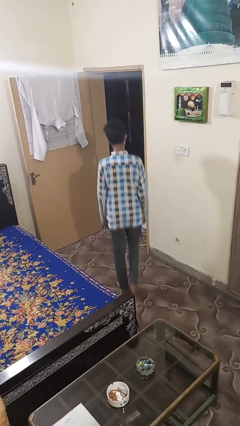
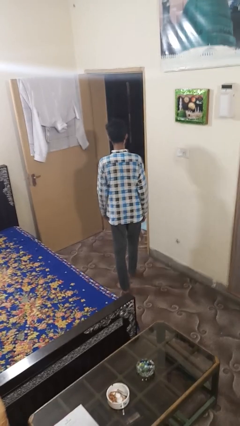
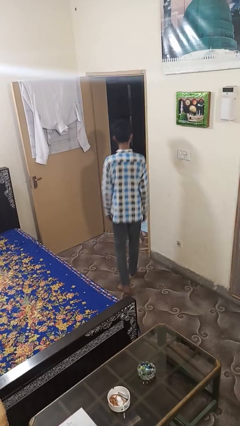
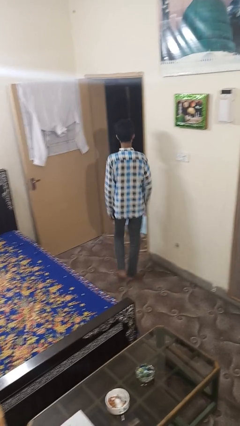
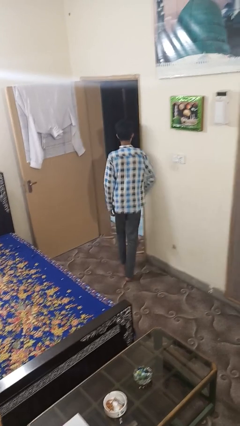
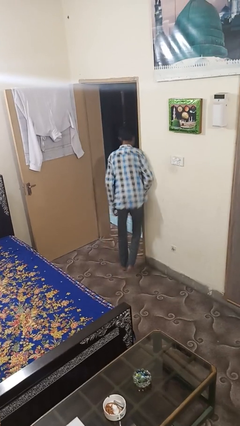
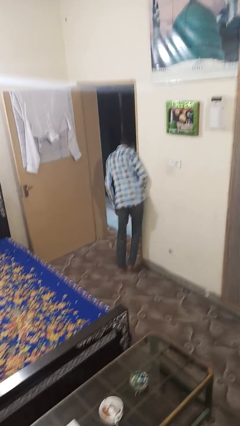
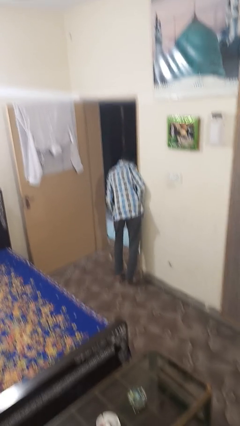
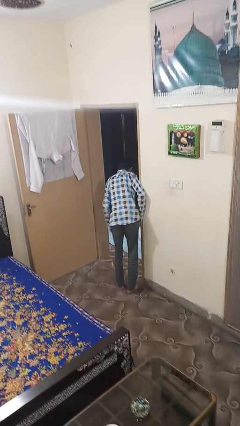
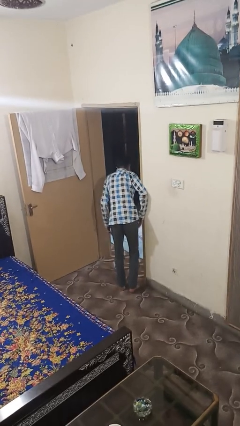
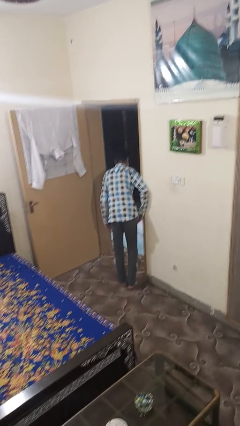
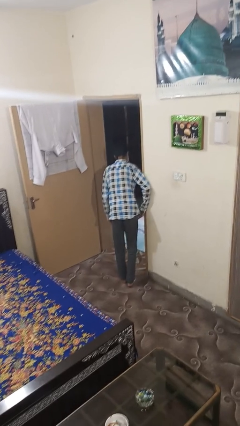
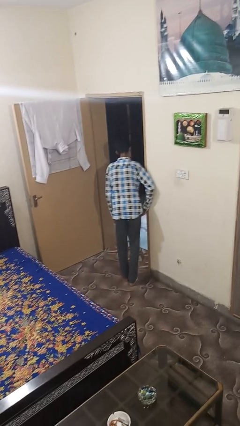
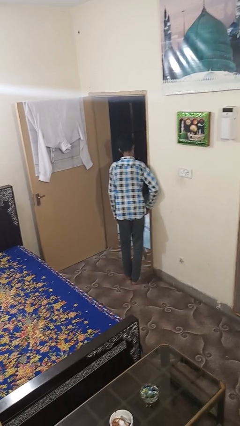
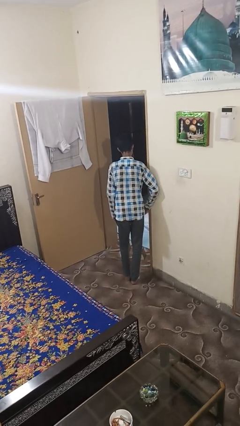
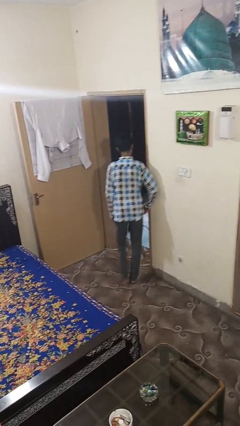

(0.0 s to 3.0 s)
person bumps into wall

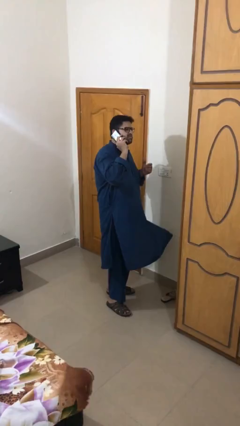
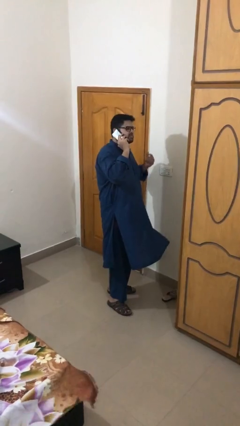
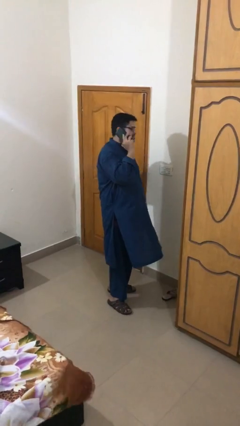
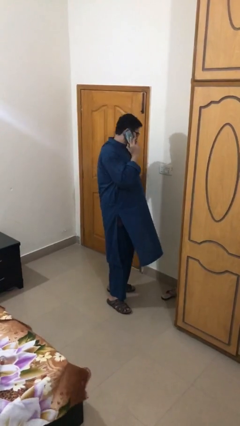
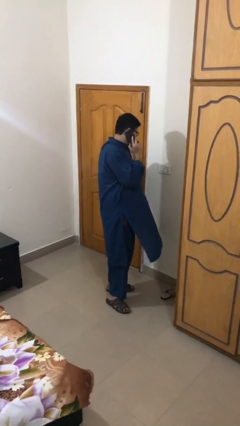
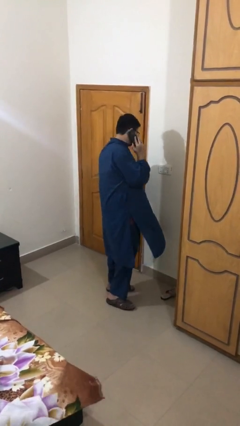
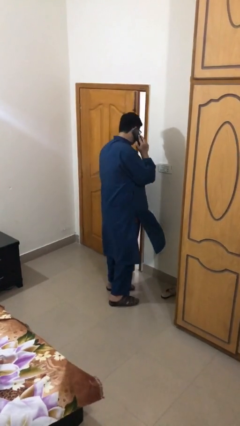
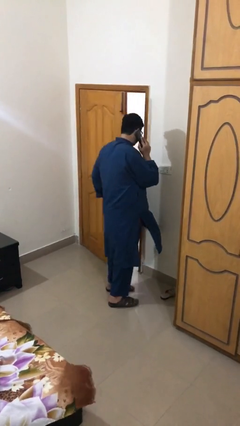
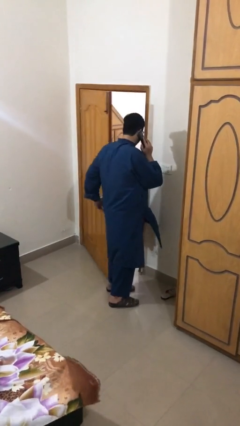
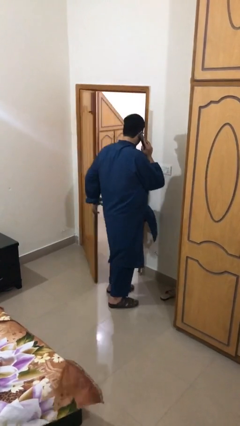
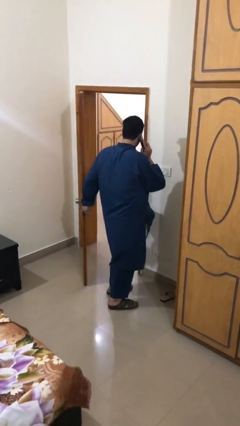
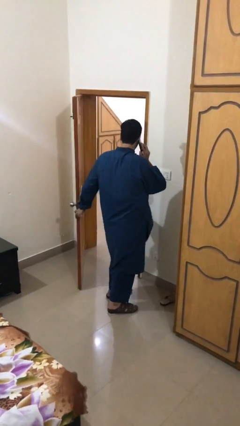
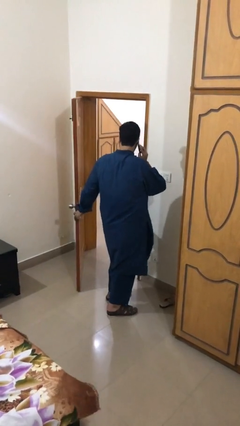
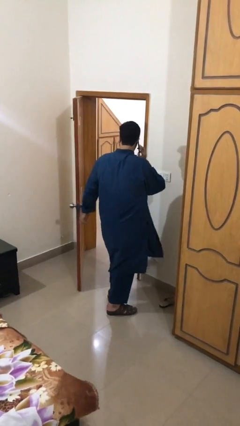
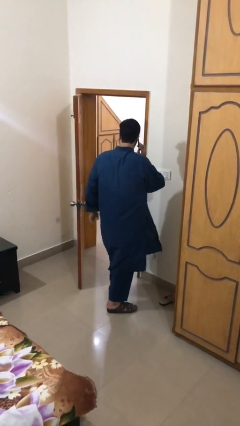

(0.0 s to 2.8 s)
person opens facility door

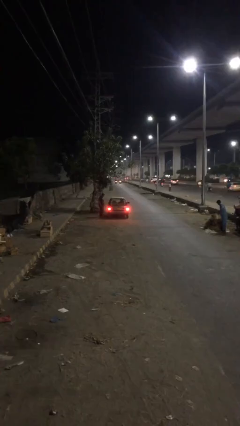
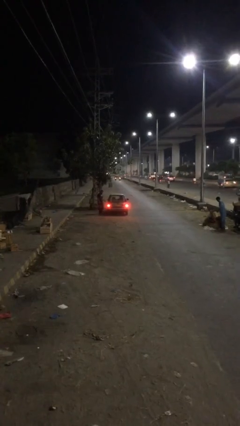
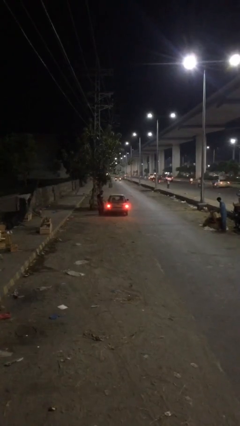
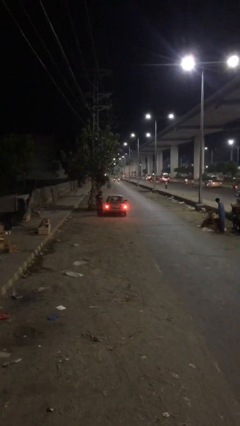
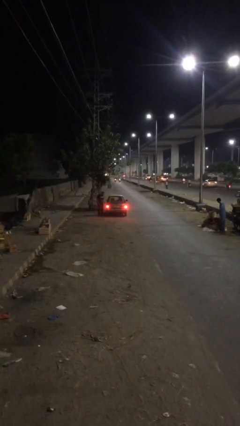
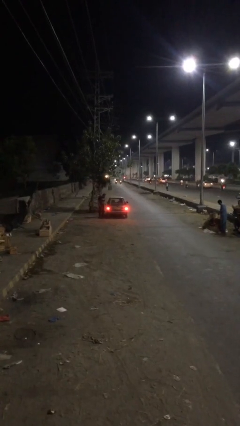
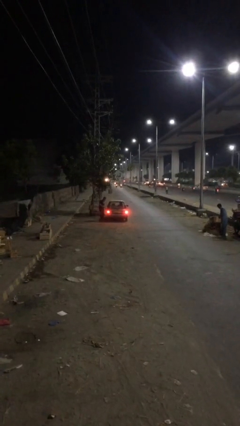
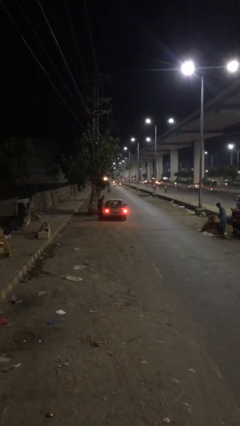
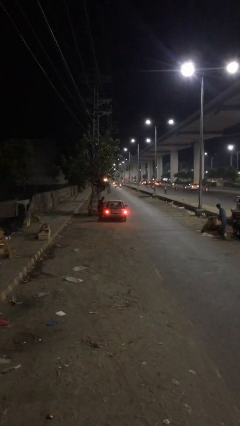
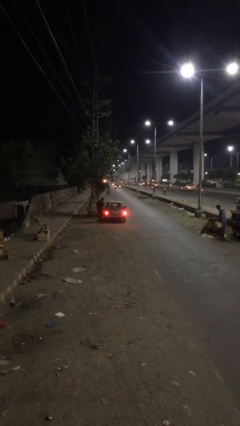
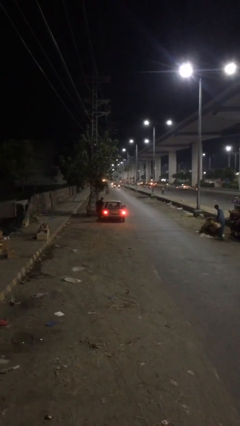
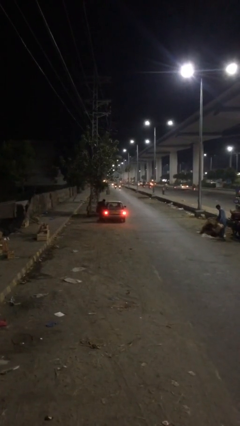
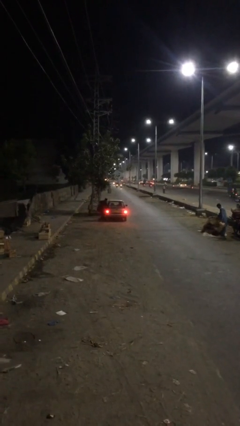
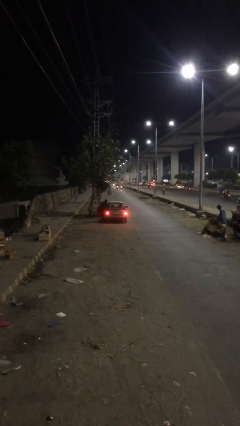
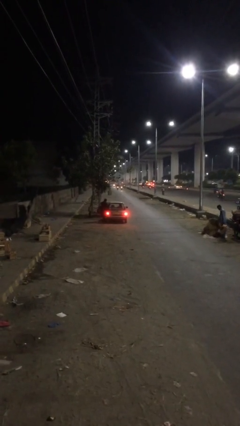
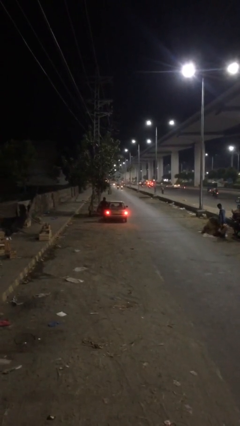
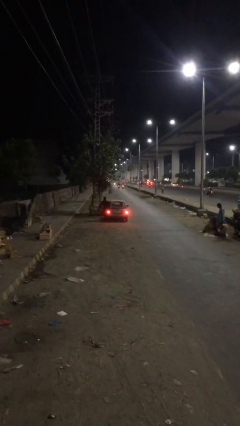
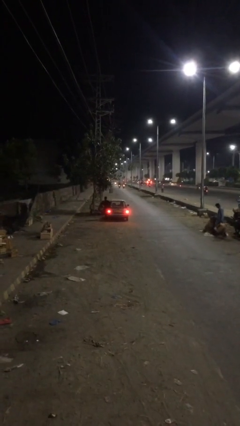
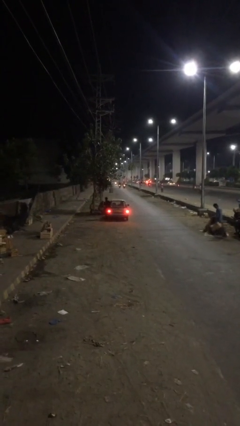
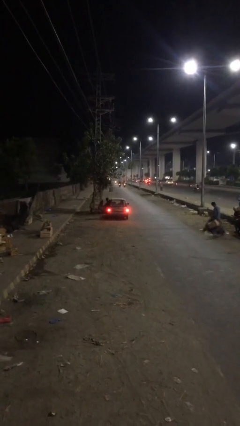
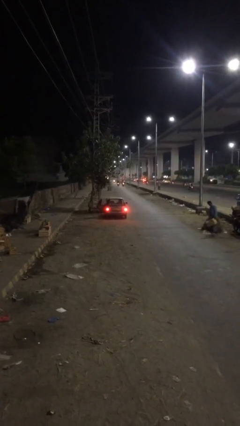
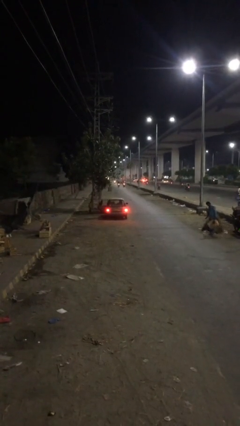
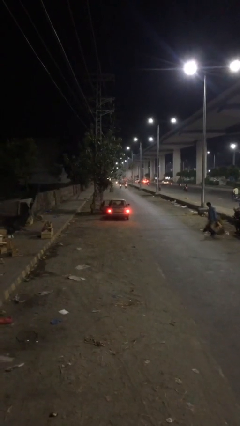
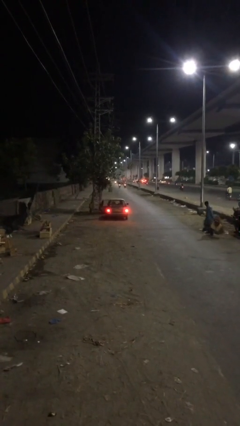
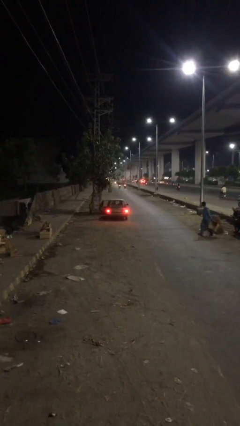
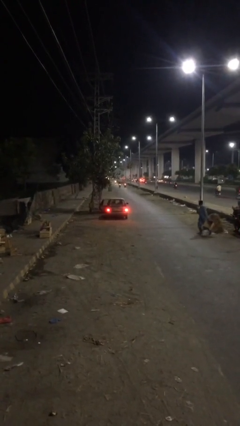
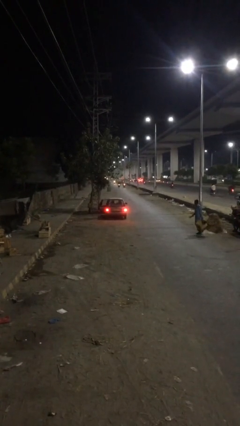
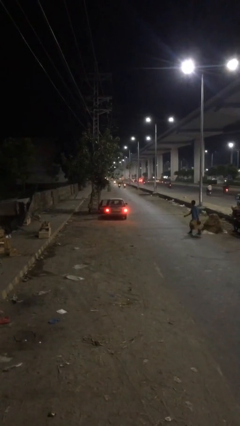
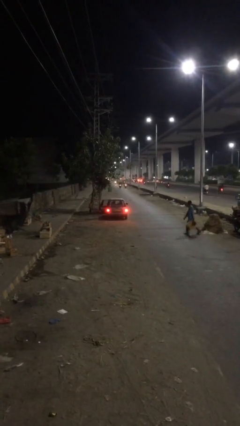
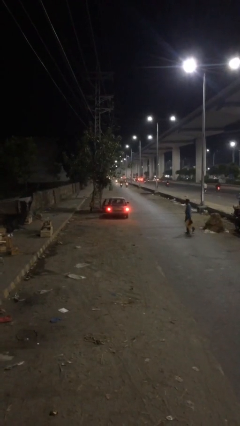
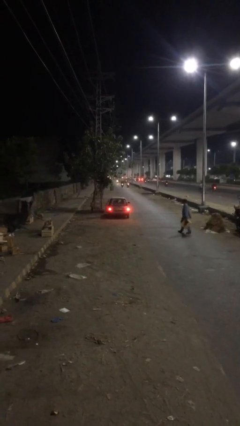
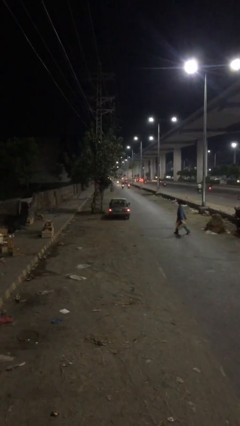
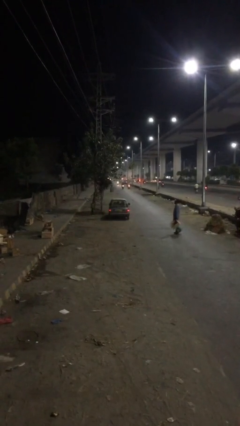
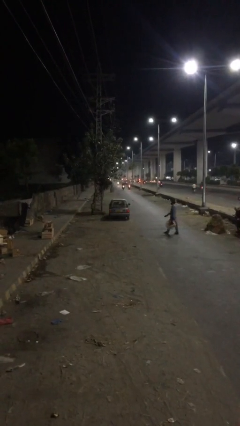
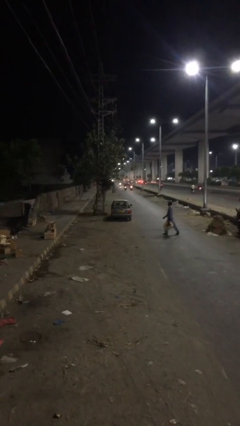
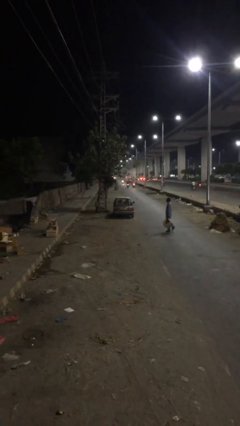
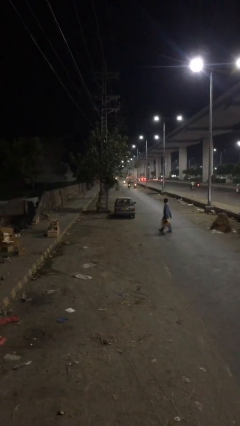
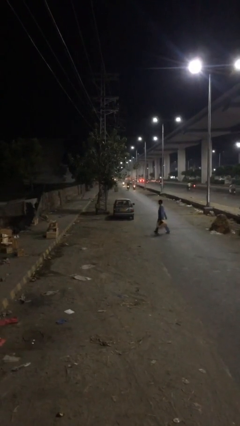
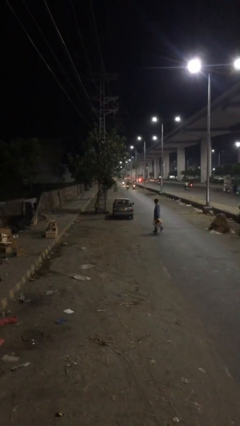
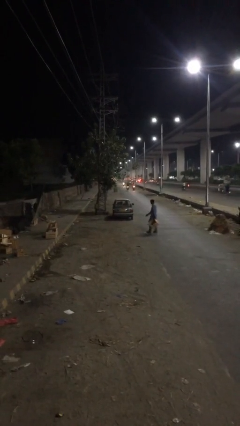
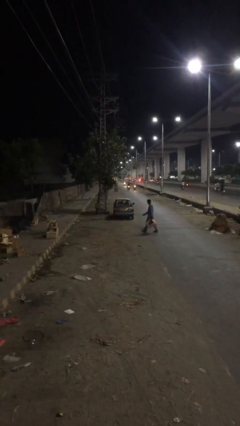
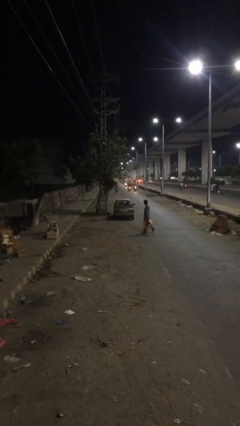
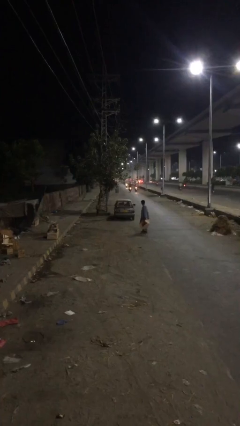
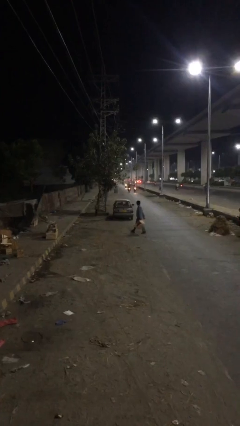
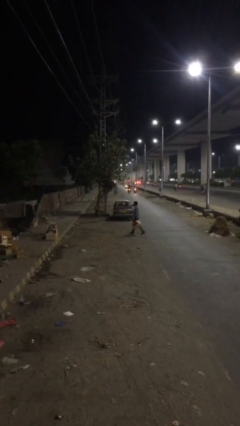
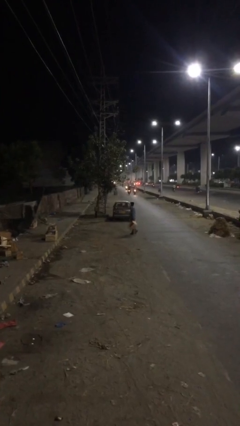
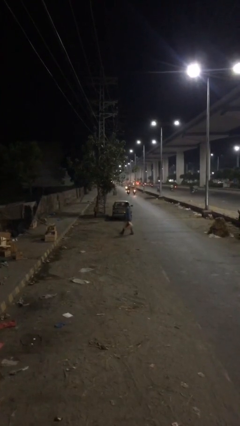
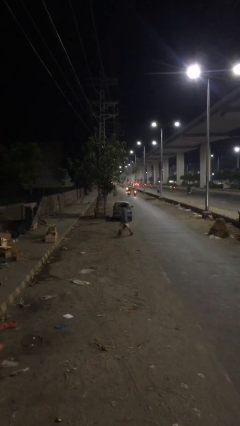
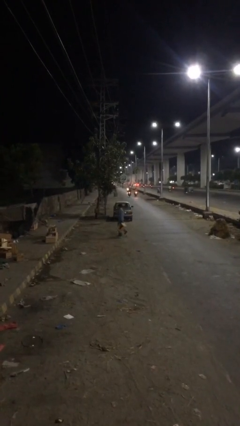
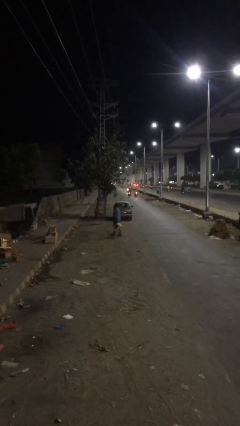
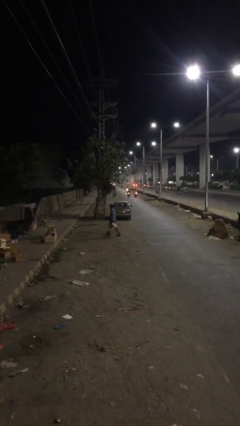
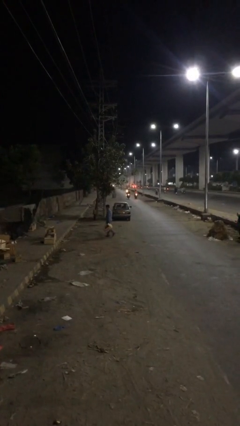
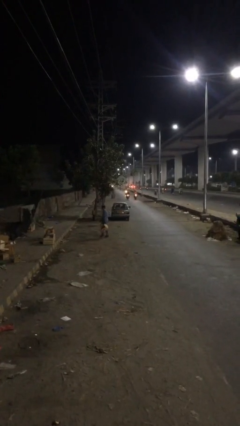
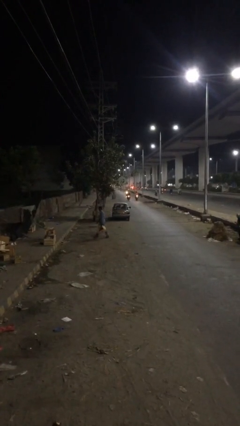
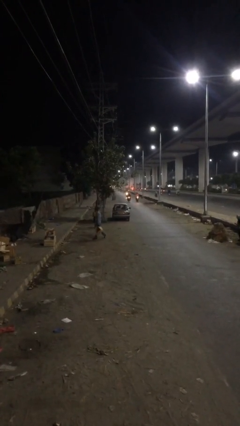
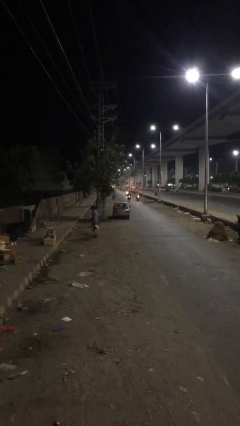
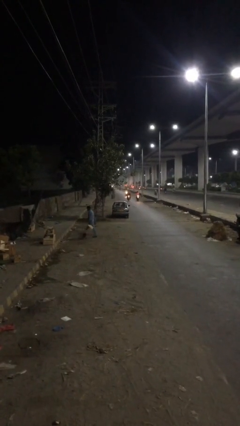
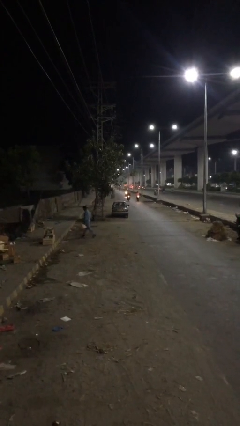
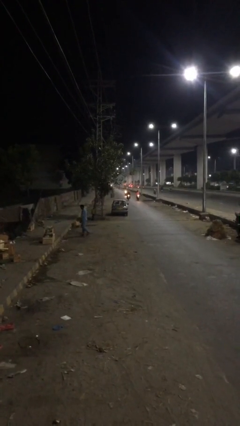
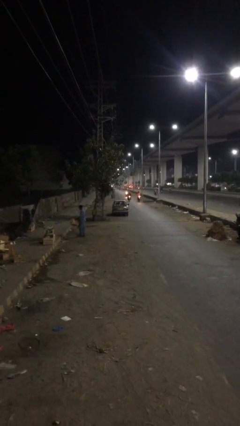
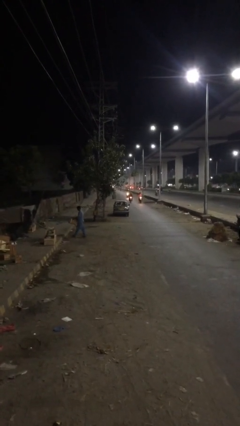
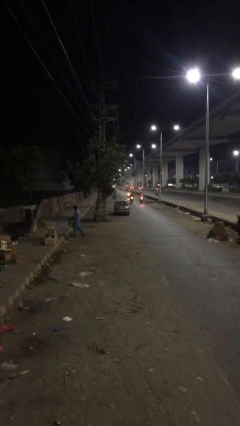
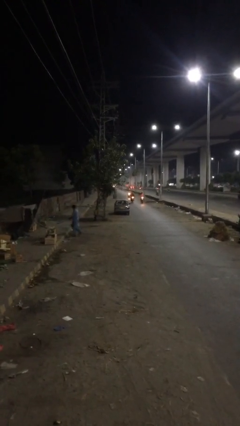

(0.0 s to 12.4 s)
car picks up person
